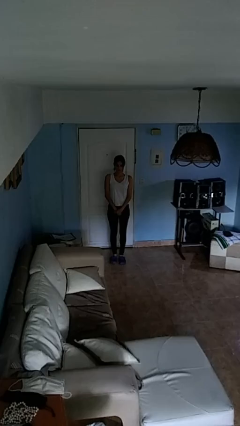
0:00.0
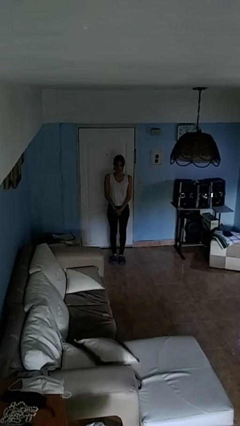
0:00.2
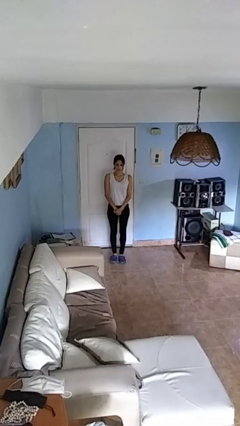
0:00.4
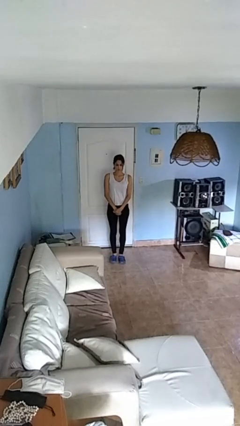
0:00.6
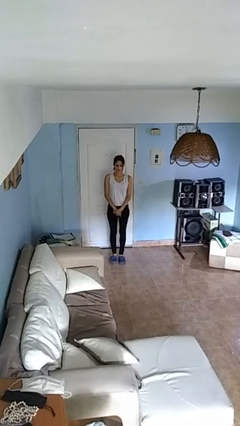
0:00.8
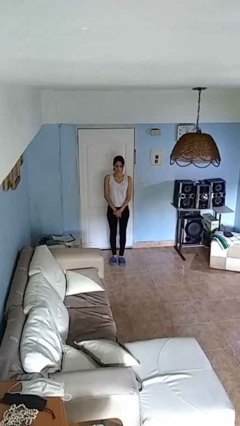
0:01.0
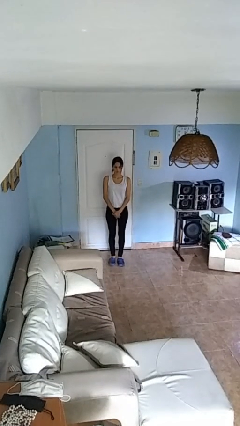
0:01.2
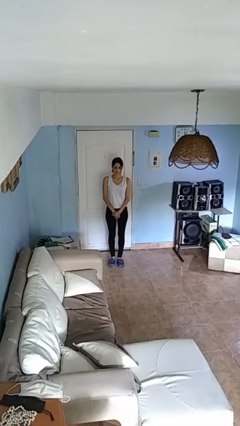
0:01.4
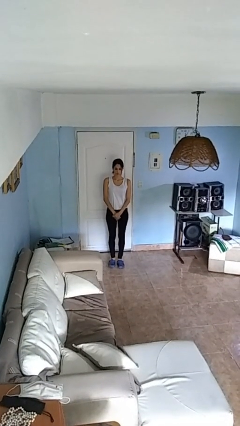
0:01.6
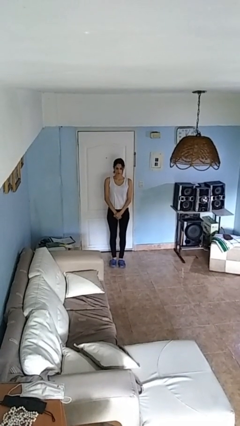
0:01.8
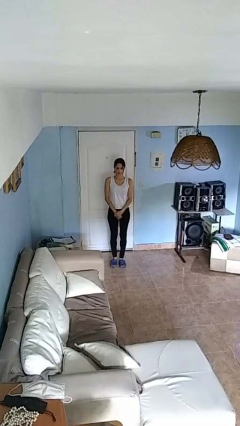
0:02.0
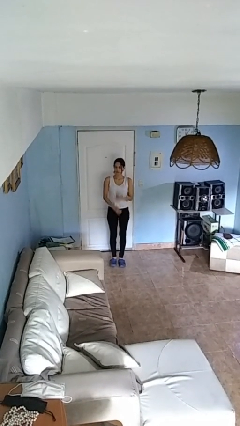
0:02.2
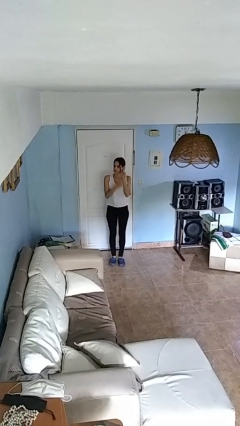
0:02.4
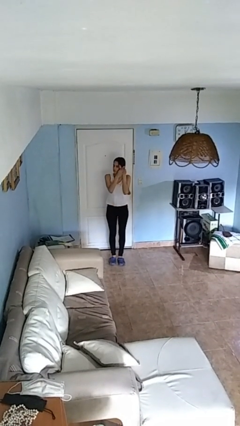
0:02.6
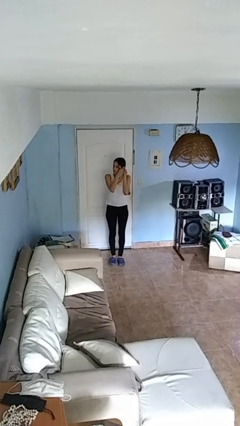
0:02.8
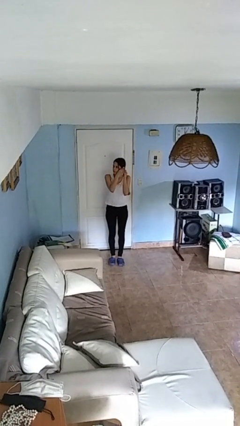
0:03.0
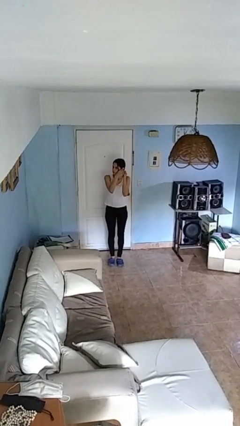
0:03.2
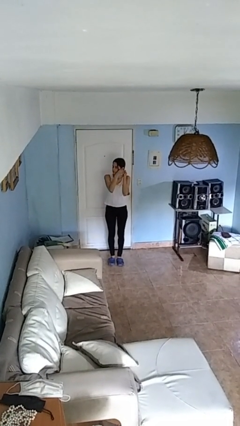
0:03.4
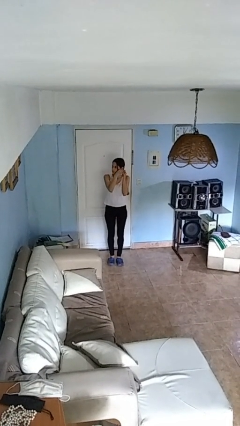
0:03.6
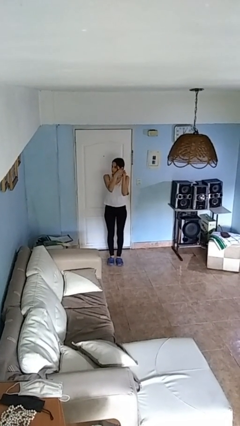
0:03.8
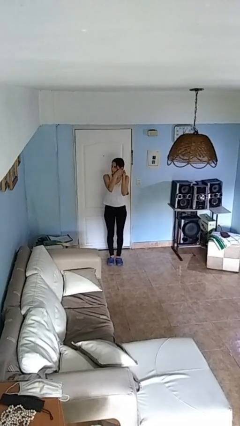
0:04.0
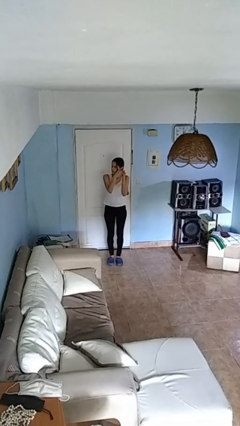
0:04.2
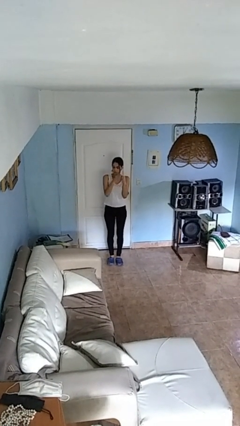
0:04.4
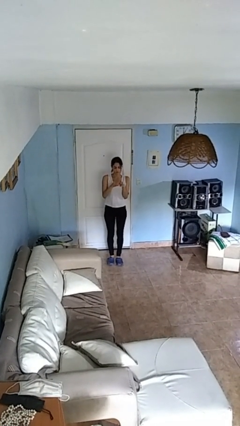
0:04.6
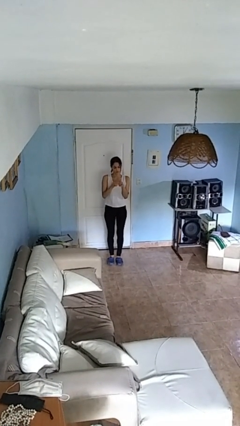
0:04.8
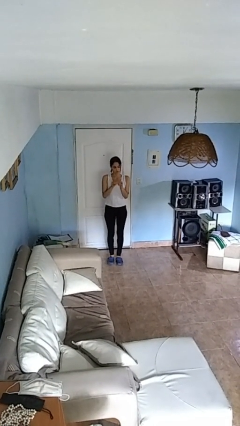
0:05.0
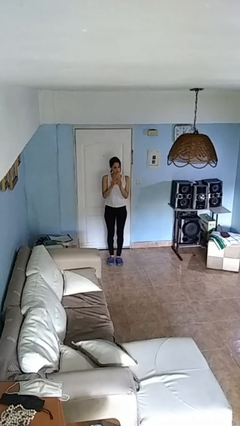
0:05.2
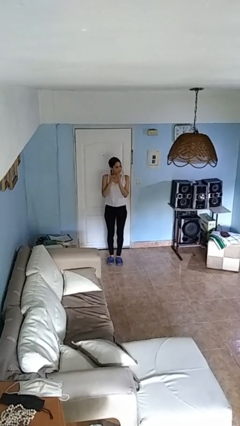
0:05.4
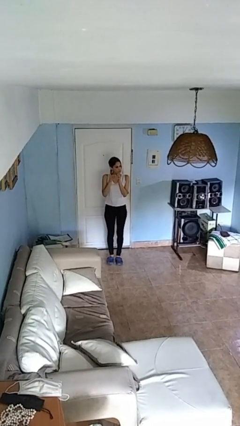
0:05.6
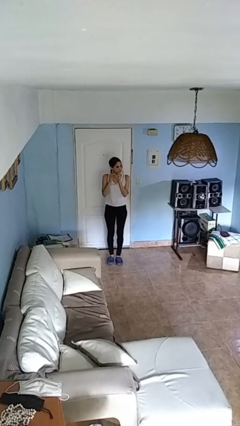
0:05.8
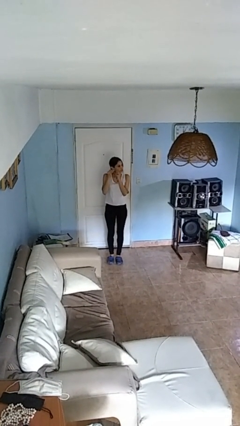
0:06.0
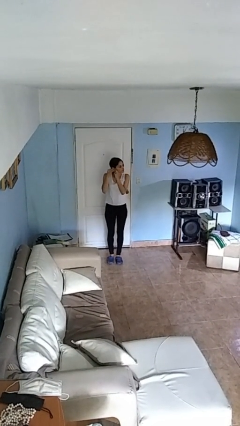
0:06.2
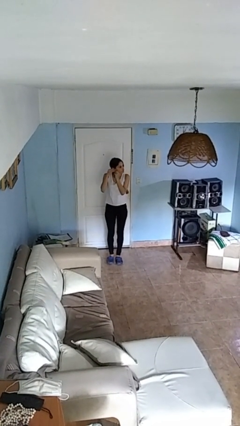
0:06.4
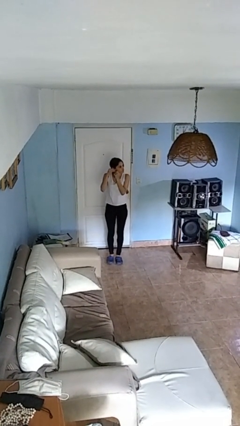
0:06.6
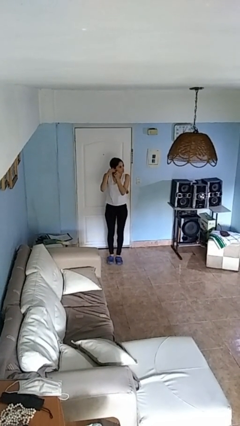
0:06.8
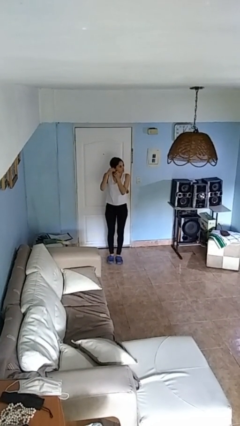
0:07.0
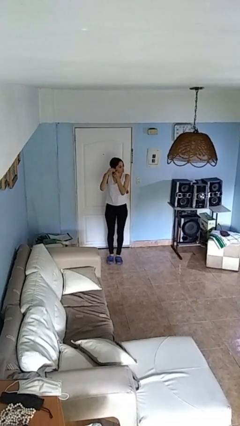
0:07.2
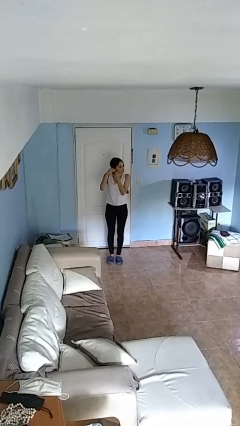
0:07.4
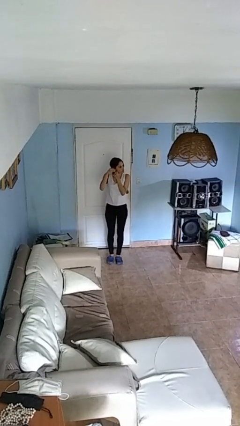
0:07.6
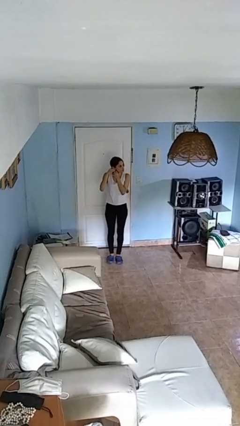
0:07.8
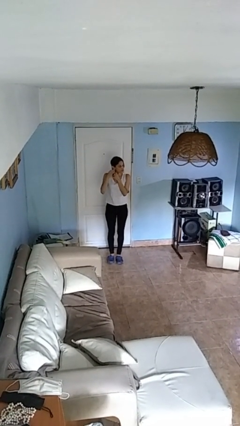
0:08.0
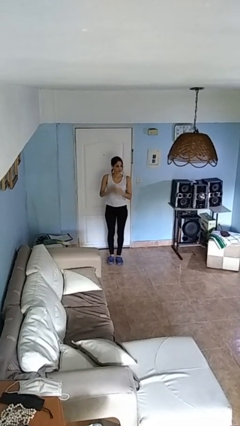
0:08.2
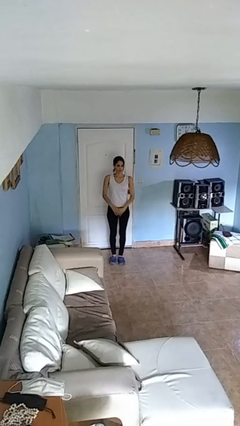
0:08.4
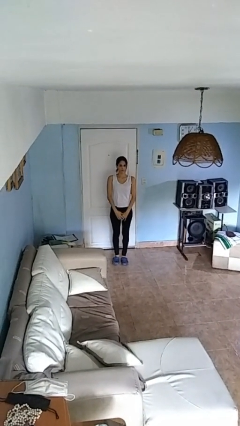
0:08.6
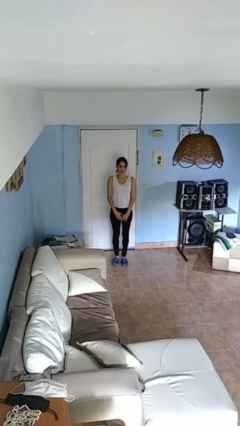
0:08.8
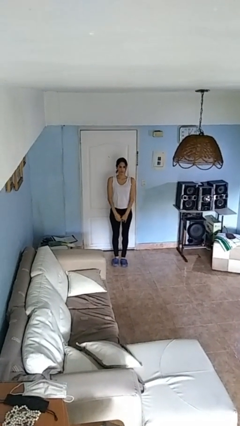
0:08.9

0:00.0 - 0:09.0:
person puts on earrings

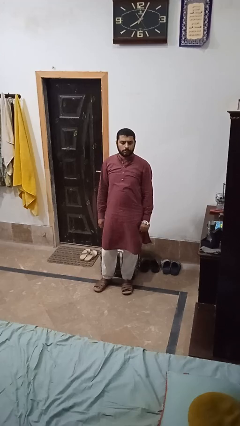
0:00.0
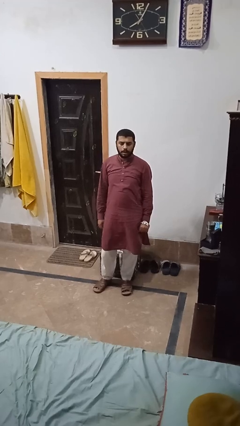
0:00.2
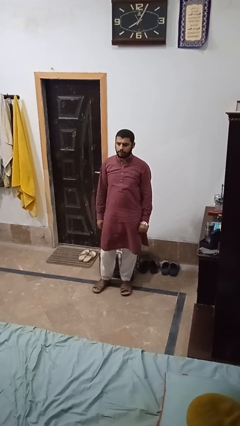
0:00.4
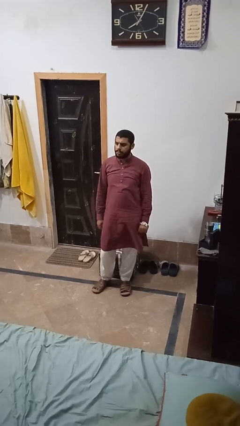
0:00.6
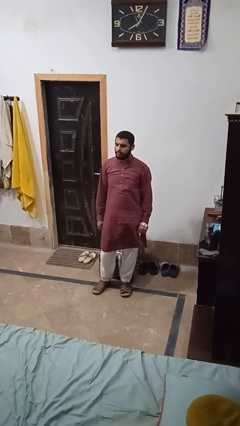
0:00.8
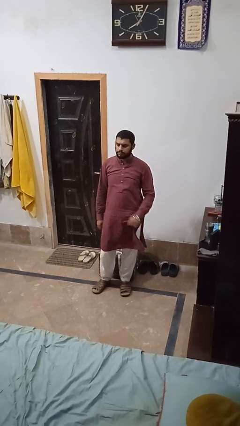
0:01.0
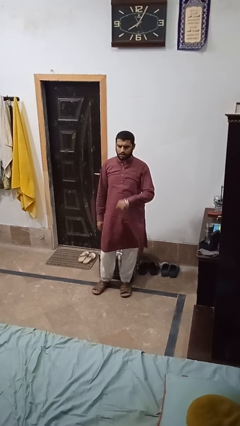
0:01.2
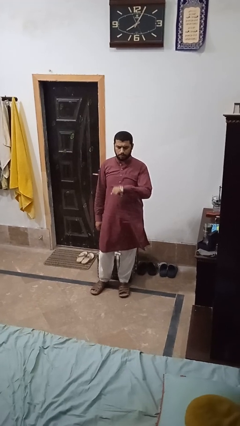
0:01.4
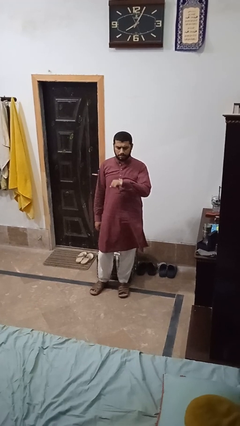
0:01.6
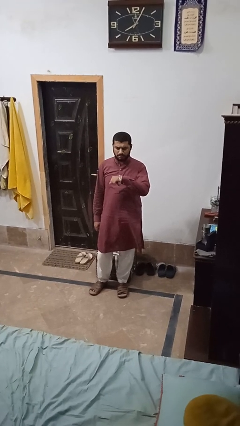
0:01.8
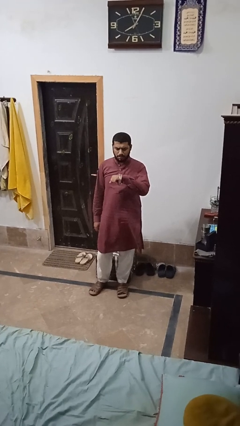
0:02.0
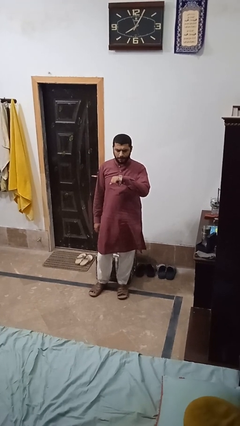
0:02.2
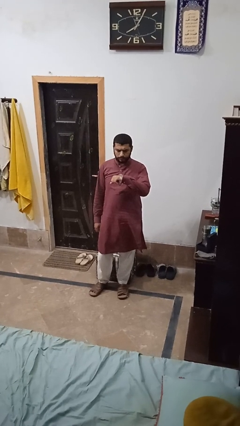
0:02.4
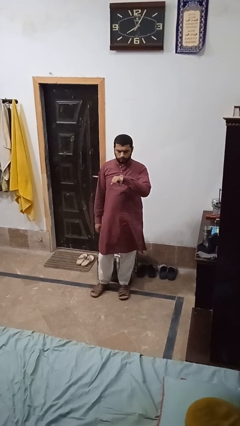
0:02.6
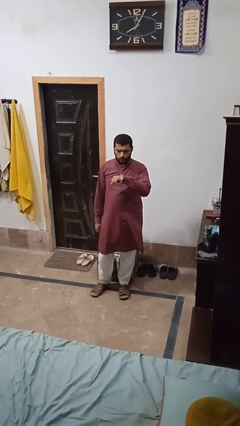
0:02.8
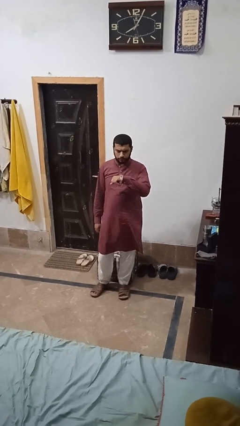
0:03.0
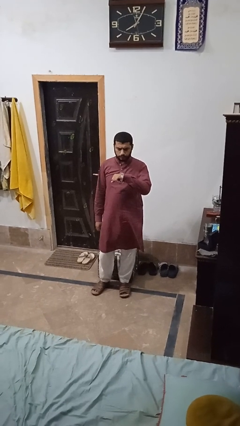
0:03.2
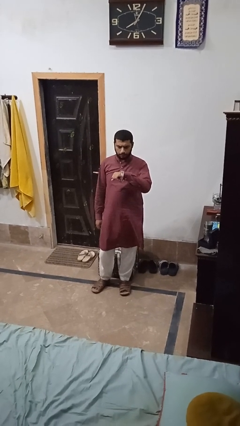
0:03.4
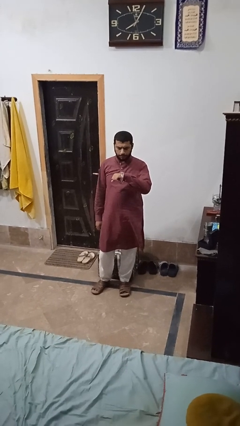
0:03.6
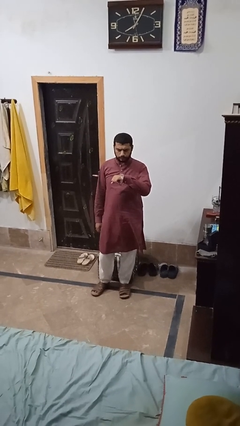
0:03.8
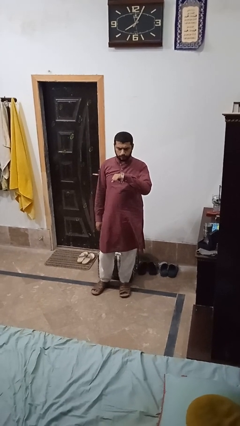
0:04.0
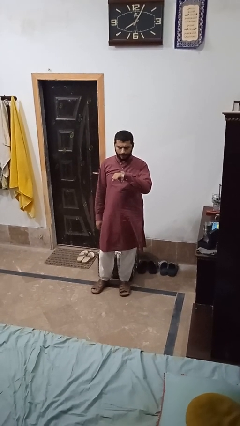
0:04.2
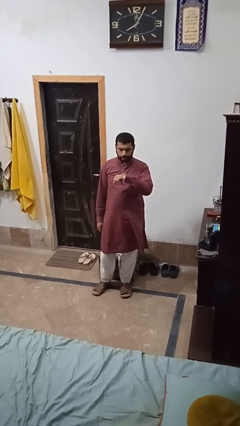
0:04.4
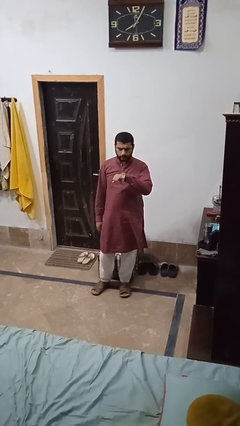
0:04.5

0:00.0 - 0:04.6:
person looks at wristwatch

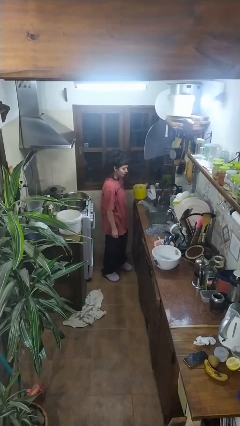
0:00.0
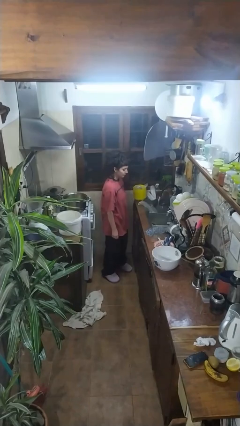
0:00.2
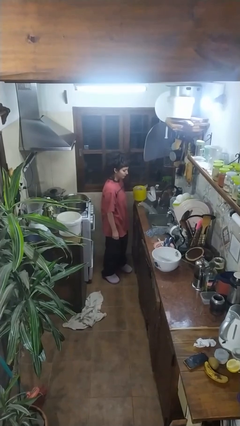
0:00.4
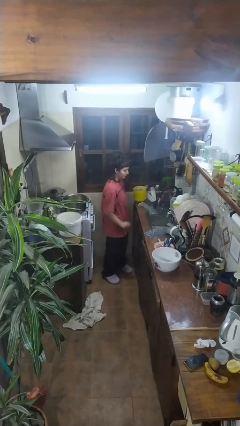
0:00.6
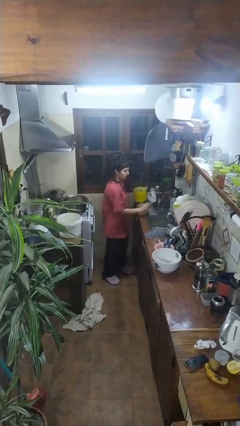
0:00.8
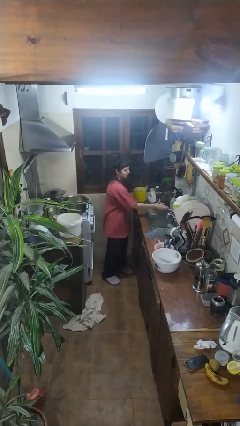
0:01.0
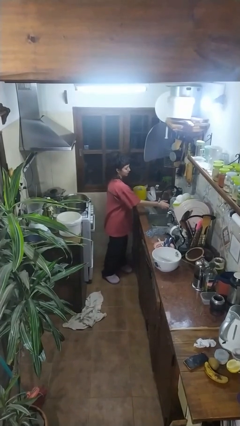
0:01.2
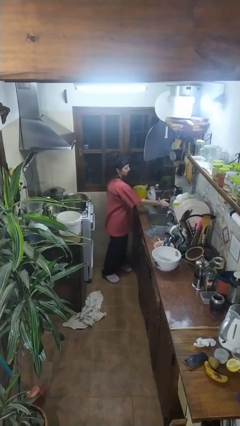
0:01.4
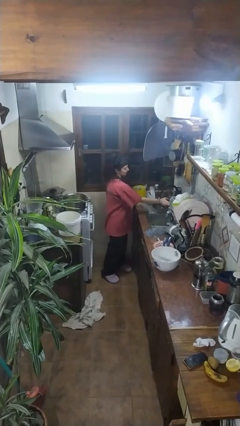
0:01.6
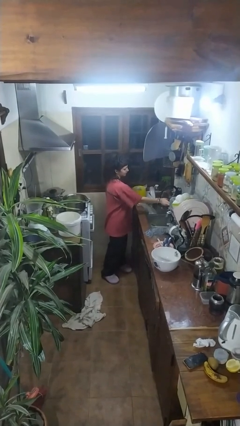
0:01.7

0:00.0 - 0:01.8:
person turns off faucet

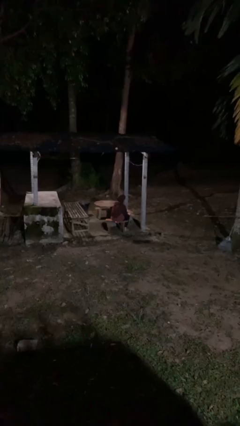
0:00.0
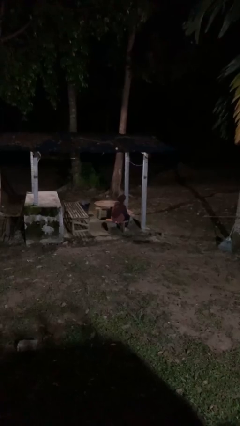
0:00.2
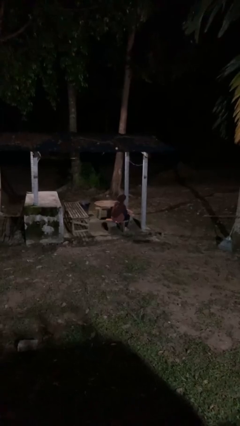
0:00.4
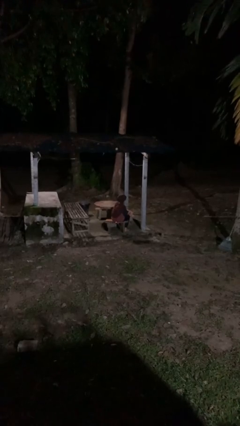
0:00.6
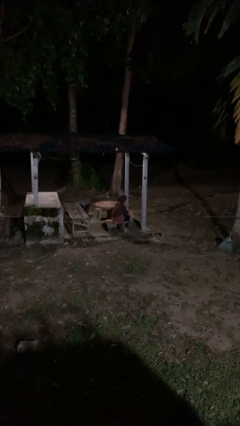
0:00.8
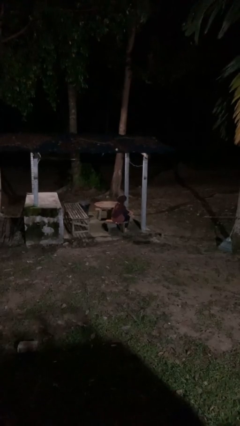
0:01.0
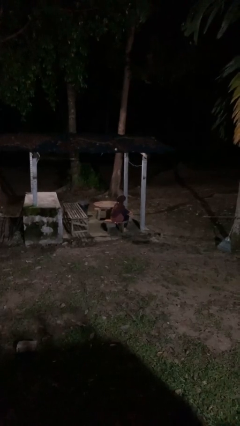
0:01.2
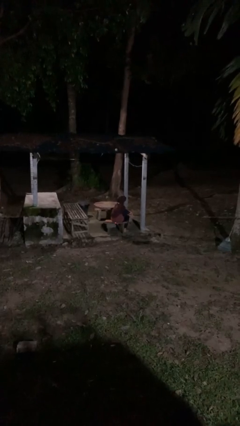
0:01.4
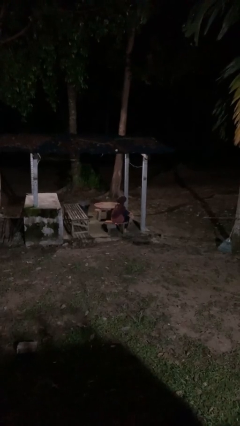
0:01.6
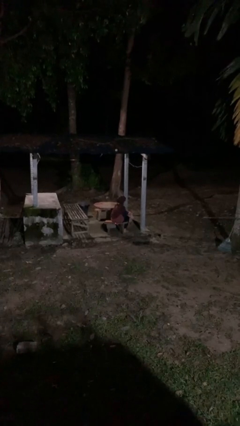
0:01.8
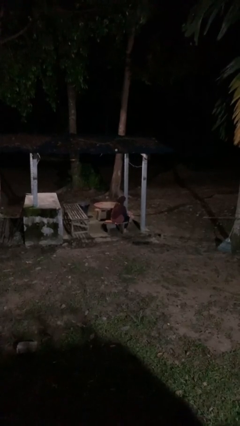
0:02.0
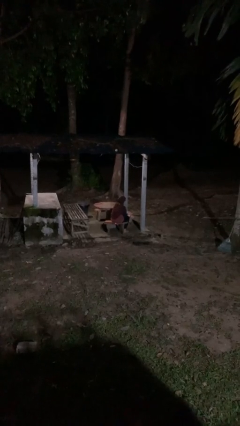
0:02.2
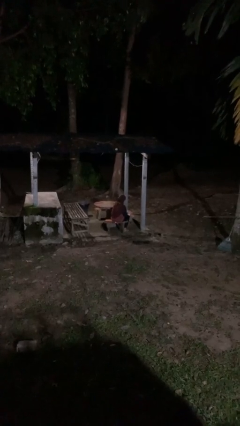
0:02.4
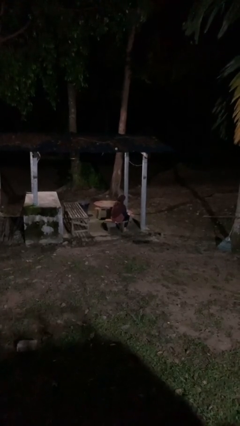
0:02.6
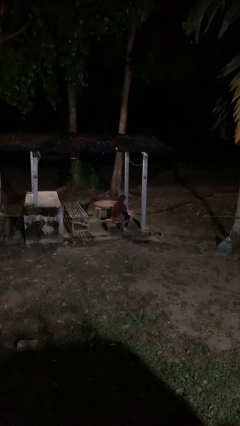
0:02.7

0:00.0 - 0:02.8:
person rubs foot
